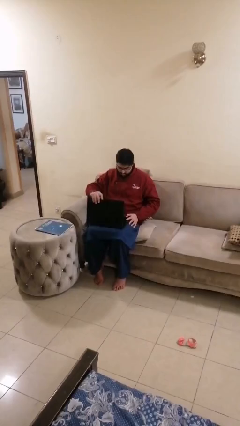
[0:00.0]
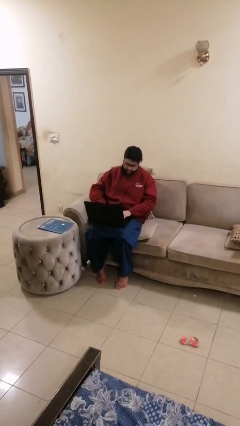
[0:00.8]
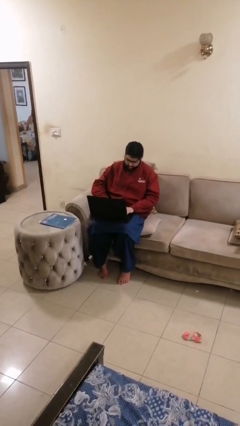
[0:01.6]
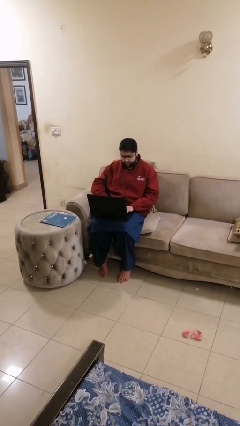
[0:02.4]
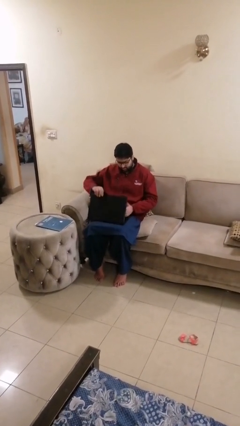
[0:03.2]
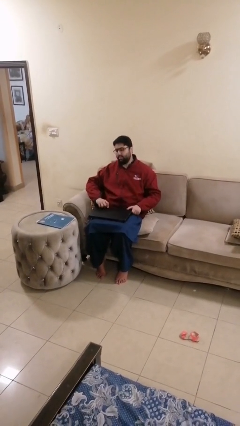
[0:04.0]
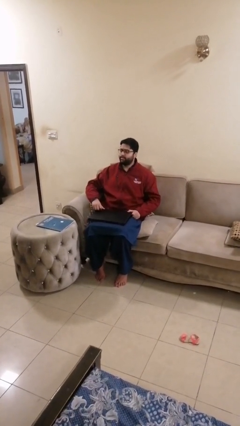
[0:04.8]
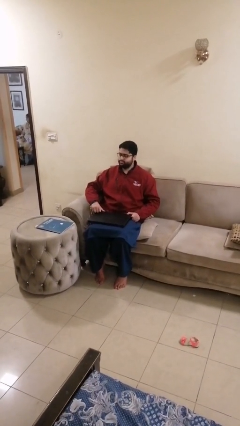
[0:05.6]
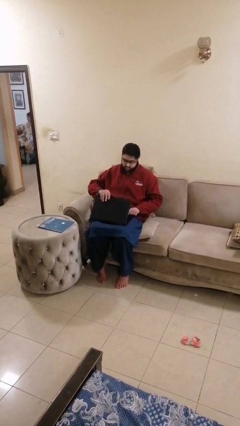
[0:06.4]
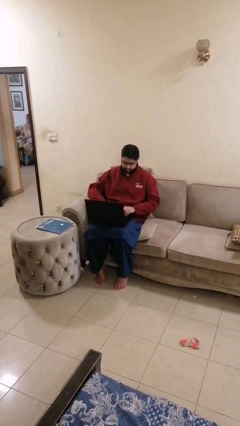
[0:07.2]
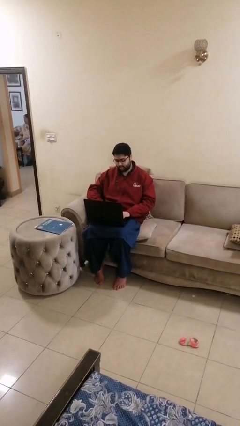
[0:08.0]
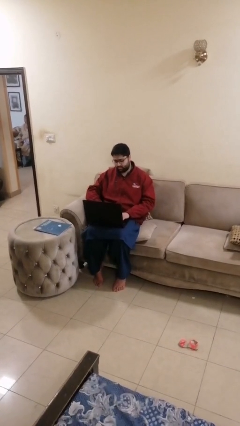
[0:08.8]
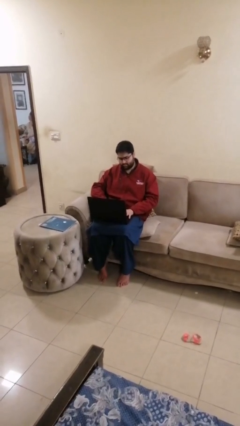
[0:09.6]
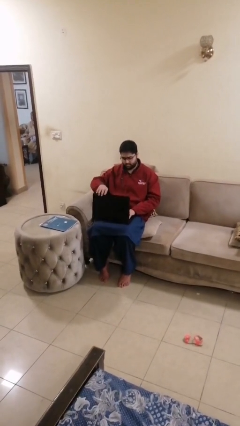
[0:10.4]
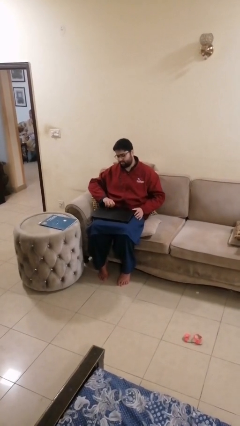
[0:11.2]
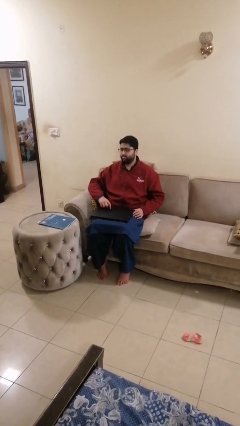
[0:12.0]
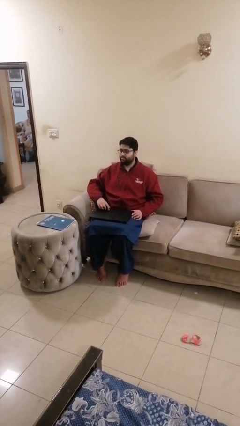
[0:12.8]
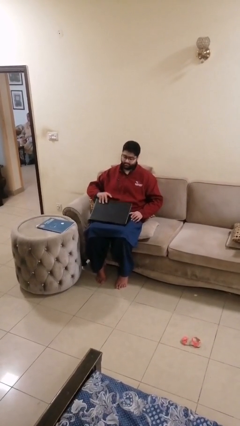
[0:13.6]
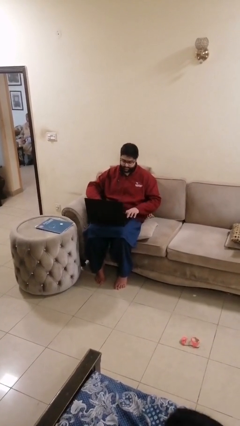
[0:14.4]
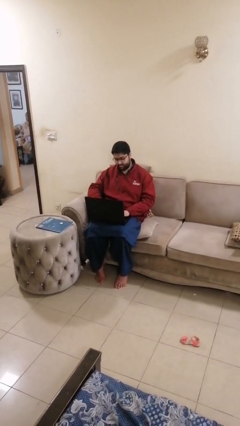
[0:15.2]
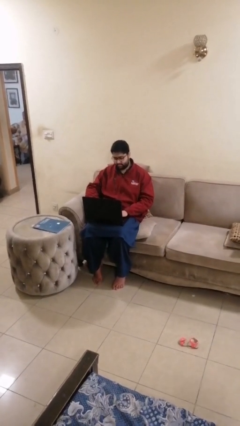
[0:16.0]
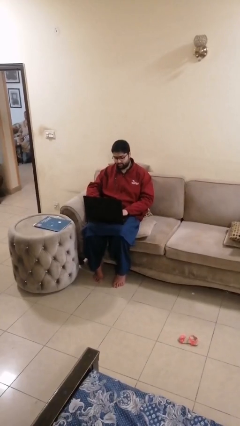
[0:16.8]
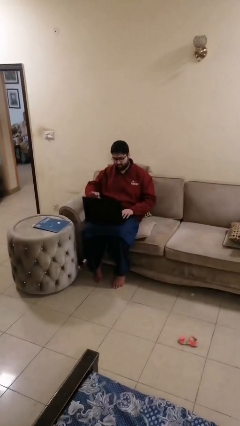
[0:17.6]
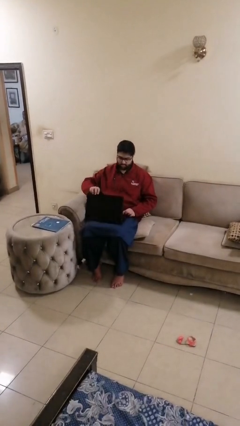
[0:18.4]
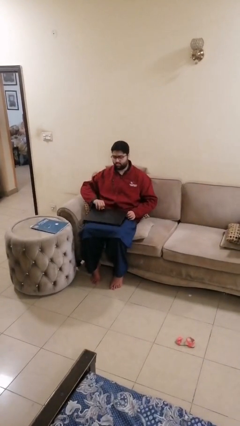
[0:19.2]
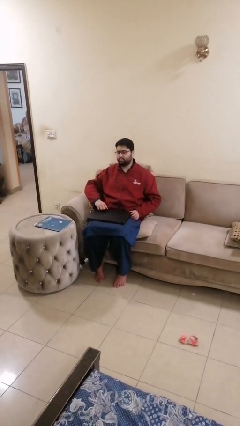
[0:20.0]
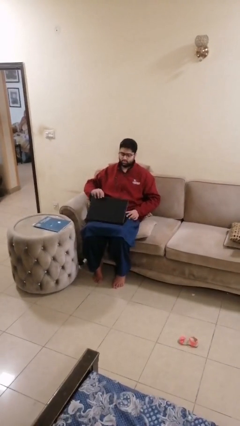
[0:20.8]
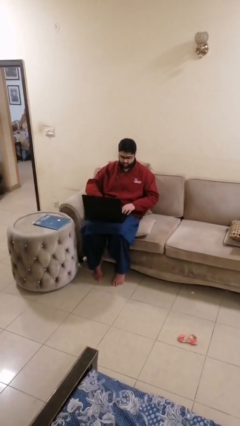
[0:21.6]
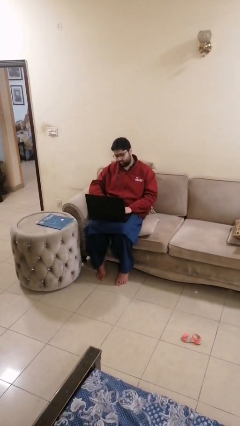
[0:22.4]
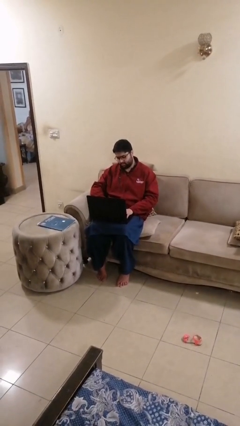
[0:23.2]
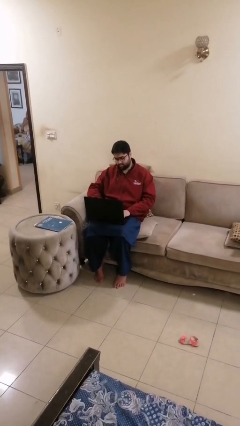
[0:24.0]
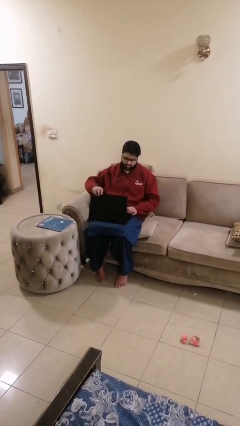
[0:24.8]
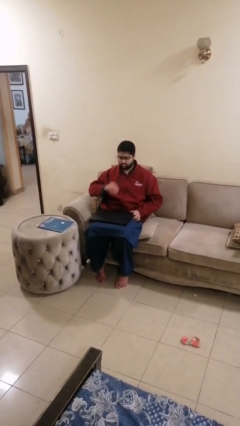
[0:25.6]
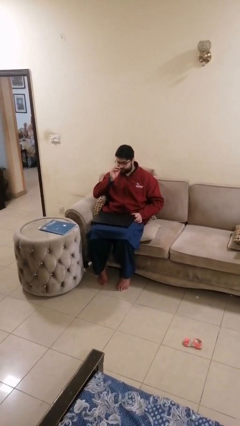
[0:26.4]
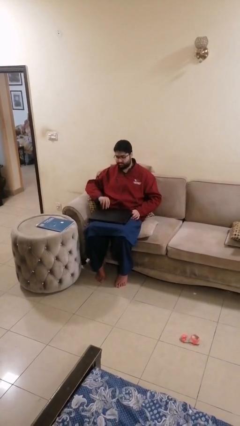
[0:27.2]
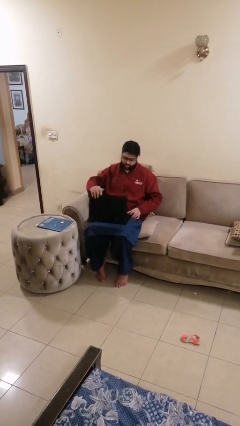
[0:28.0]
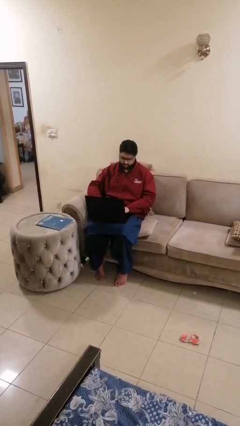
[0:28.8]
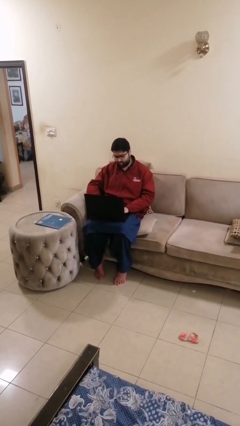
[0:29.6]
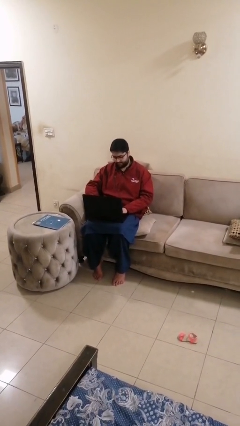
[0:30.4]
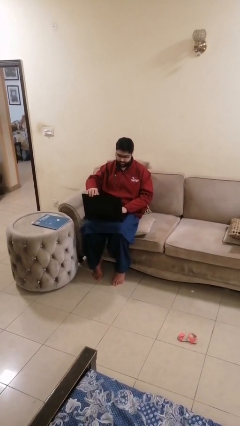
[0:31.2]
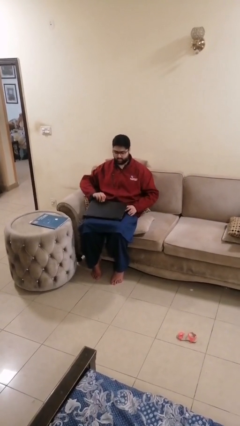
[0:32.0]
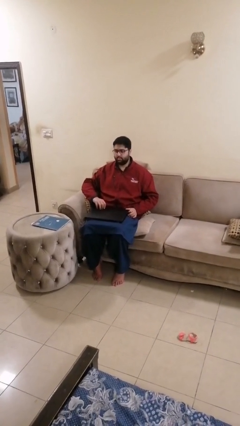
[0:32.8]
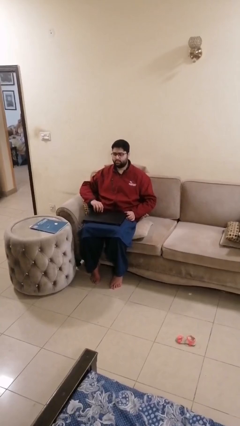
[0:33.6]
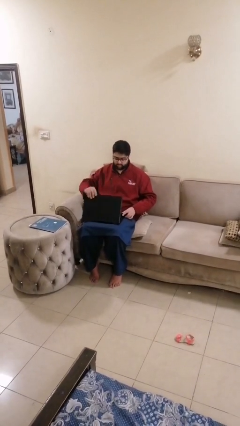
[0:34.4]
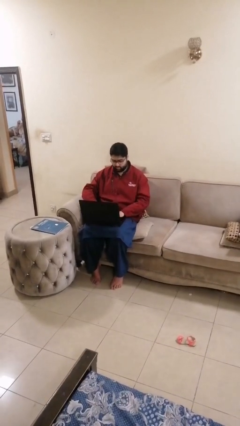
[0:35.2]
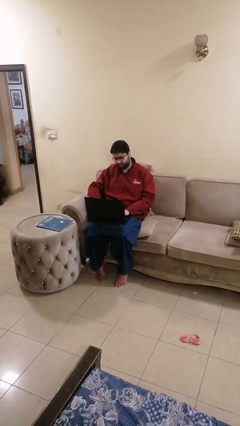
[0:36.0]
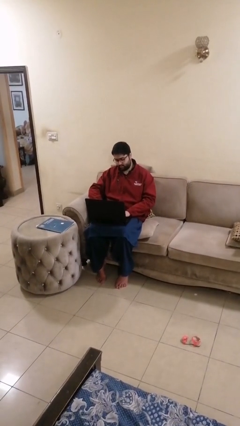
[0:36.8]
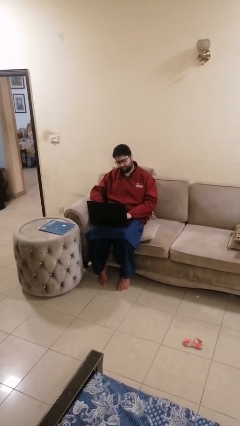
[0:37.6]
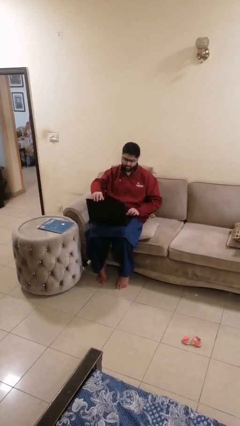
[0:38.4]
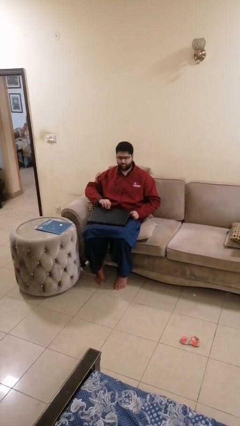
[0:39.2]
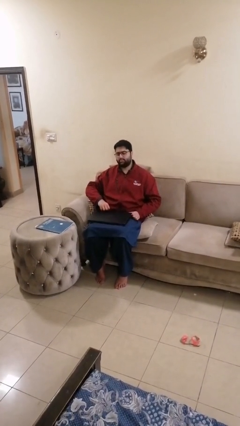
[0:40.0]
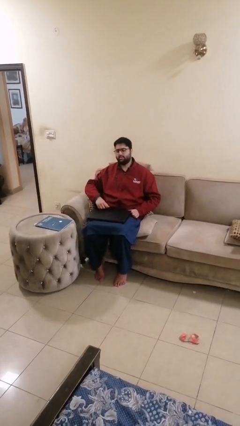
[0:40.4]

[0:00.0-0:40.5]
person interacts with laptop

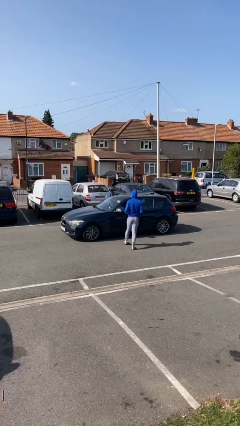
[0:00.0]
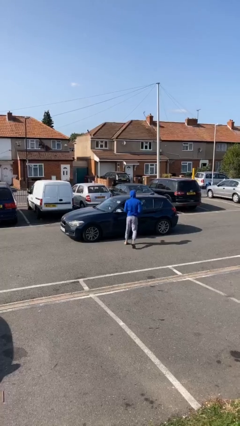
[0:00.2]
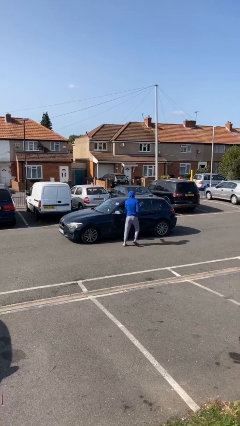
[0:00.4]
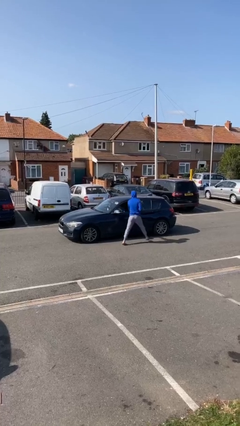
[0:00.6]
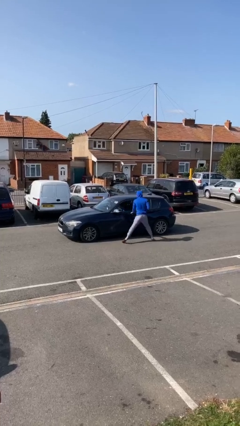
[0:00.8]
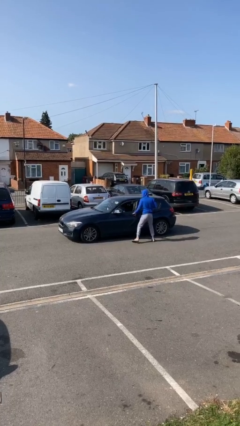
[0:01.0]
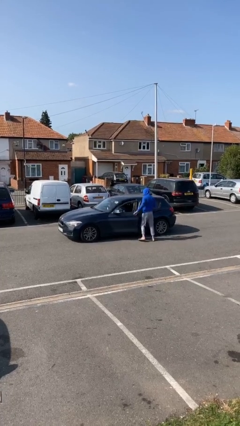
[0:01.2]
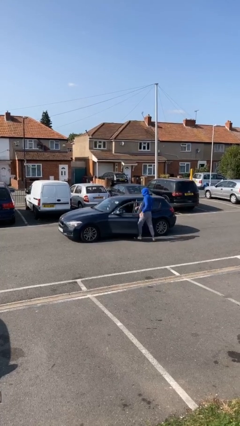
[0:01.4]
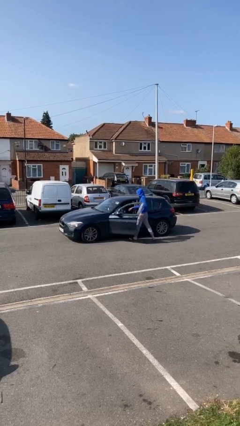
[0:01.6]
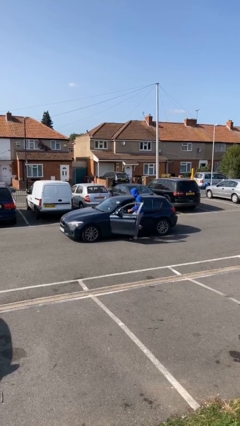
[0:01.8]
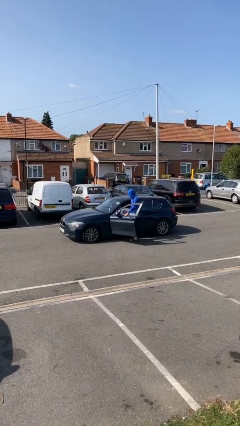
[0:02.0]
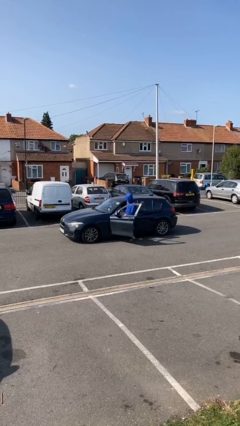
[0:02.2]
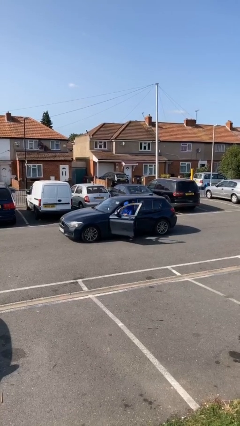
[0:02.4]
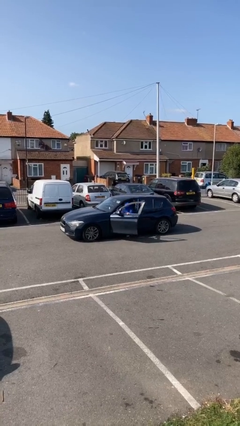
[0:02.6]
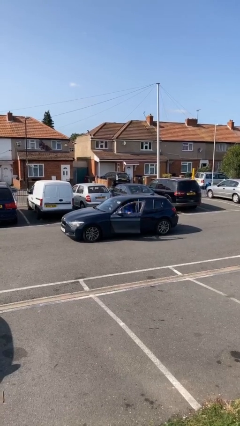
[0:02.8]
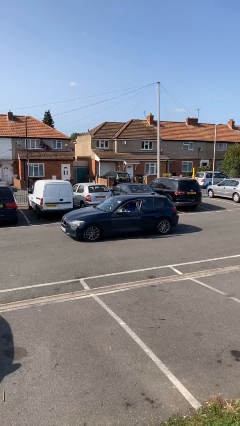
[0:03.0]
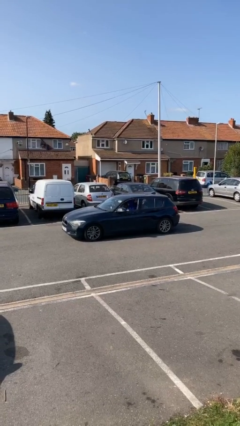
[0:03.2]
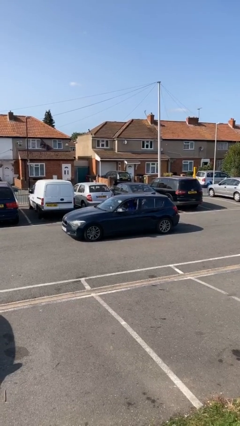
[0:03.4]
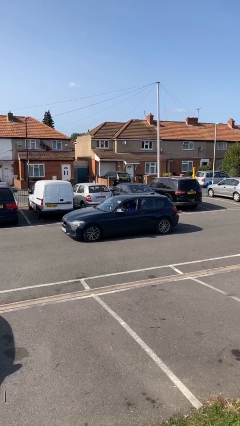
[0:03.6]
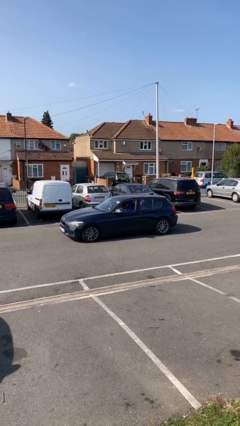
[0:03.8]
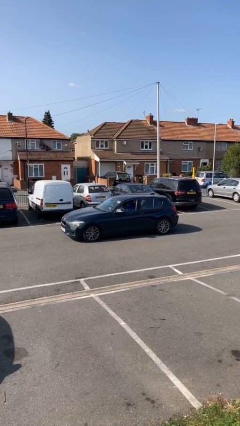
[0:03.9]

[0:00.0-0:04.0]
car picks up person

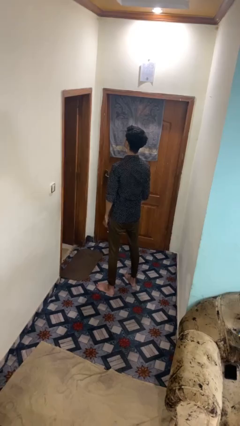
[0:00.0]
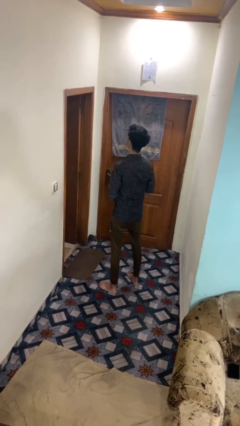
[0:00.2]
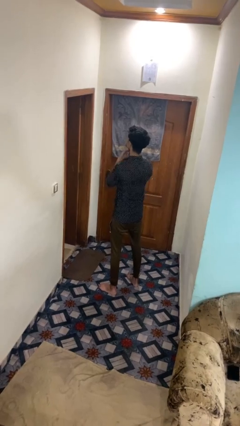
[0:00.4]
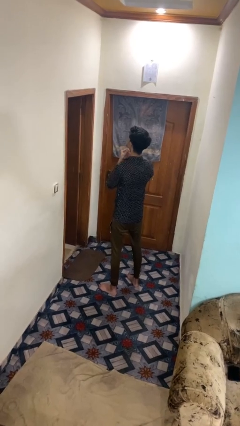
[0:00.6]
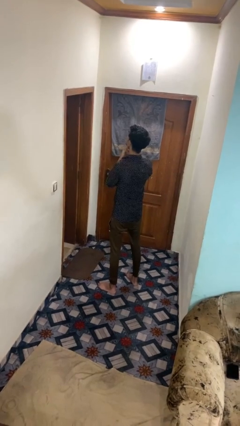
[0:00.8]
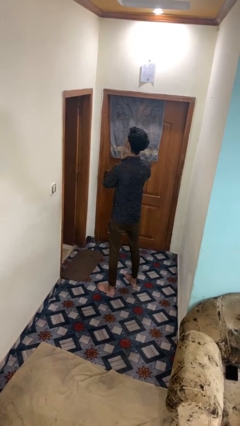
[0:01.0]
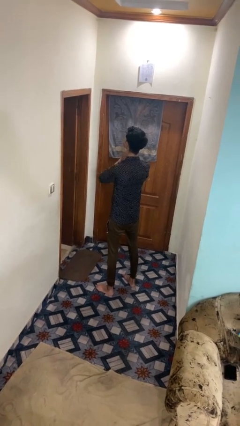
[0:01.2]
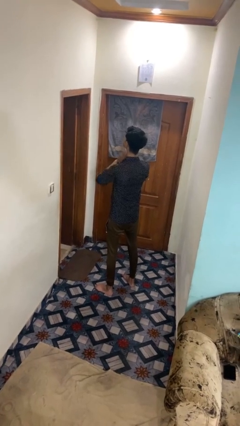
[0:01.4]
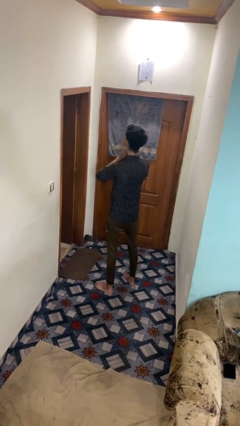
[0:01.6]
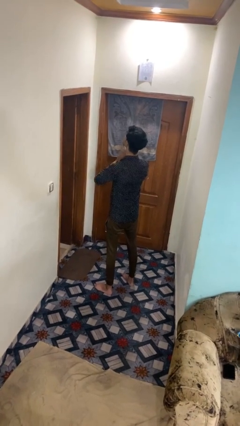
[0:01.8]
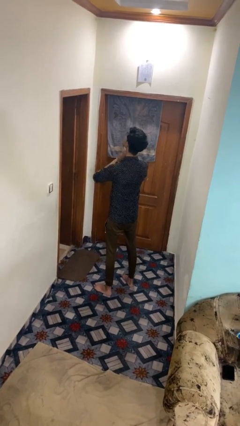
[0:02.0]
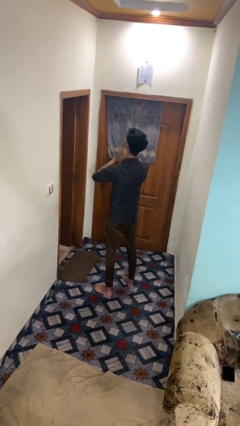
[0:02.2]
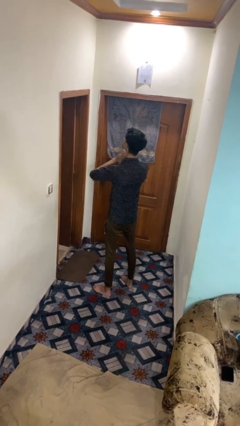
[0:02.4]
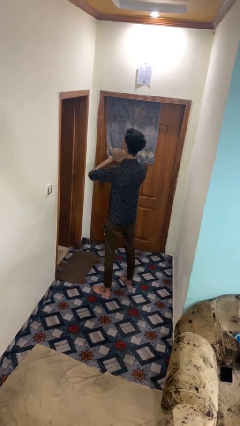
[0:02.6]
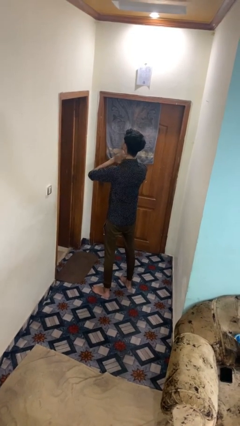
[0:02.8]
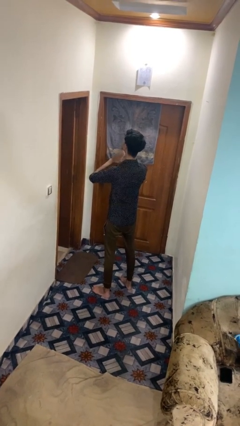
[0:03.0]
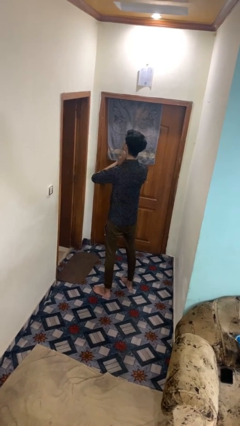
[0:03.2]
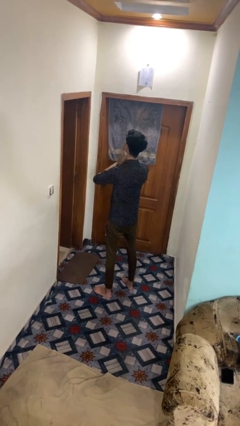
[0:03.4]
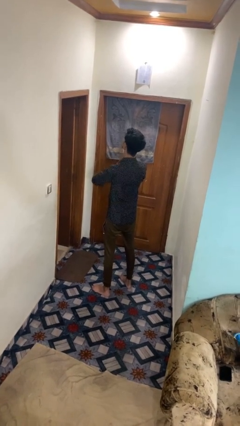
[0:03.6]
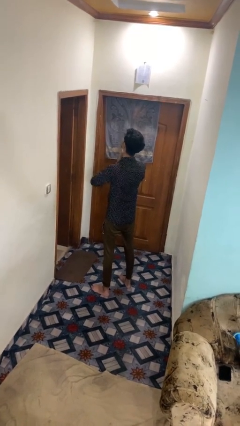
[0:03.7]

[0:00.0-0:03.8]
person rubs neck
